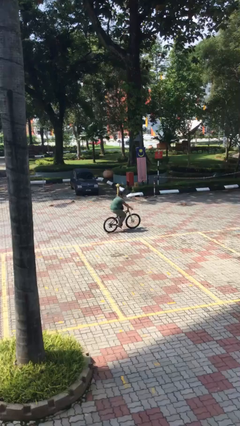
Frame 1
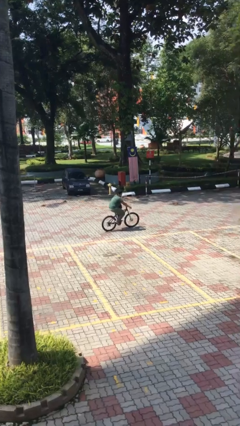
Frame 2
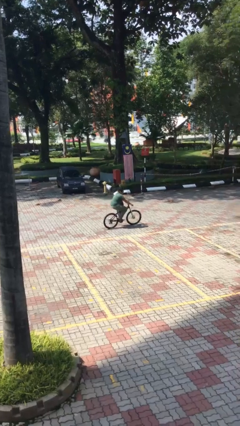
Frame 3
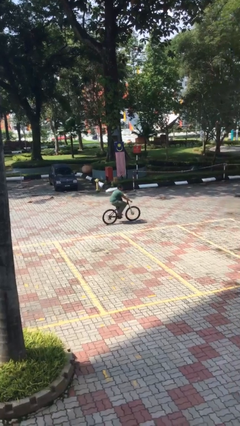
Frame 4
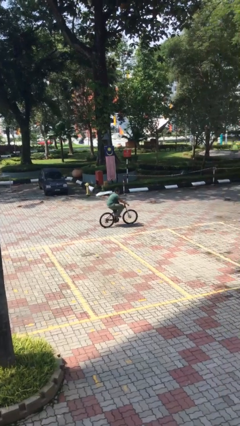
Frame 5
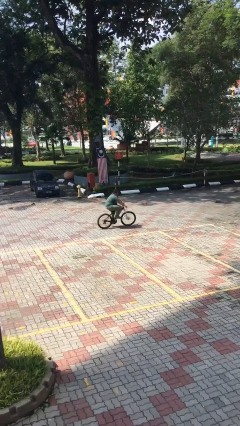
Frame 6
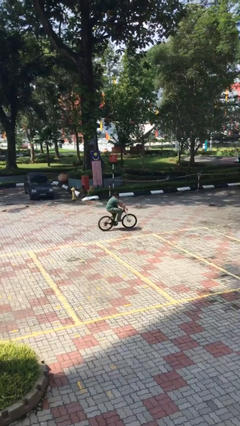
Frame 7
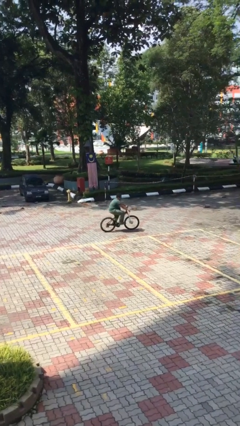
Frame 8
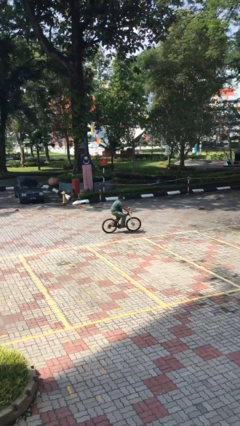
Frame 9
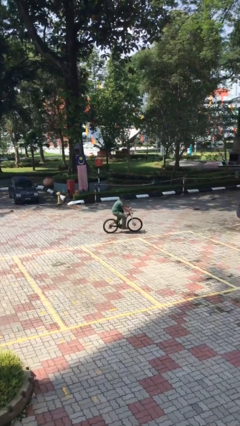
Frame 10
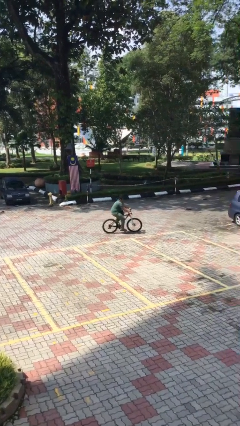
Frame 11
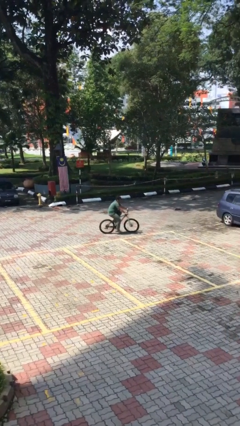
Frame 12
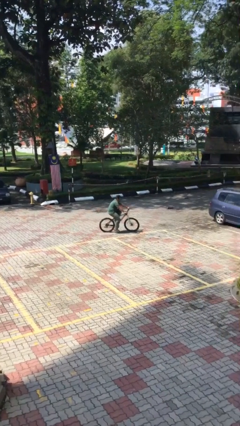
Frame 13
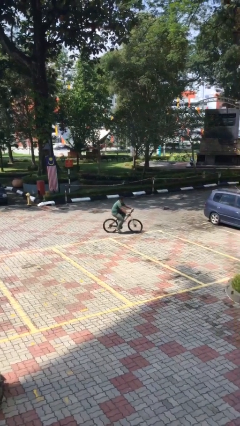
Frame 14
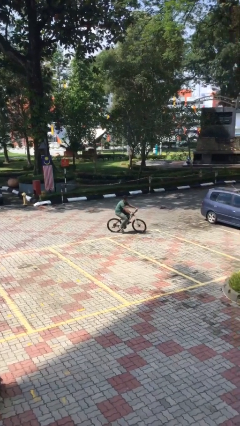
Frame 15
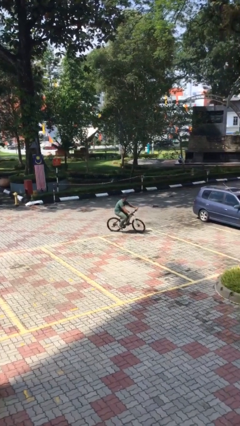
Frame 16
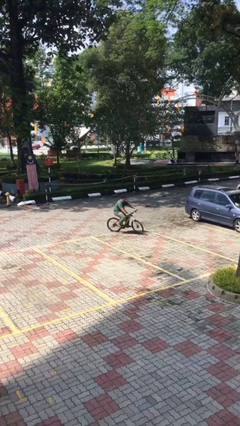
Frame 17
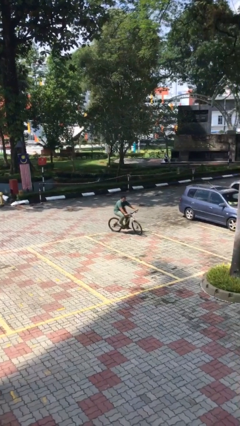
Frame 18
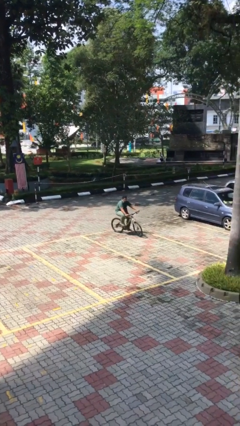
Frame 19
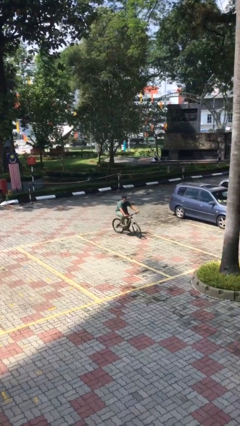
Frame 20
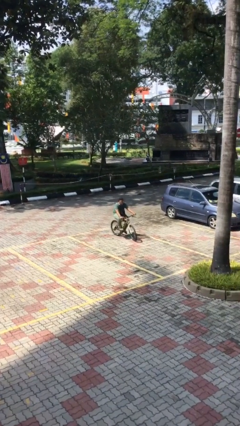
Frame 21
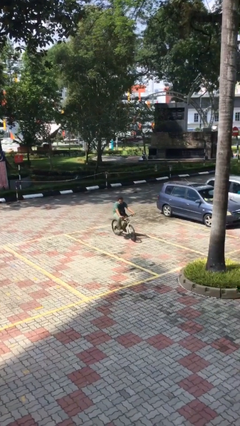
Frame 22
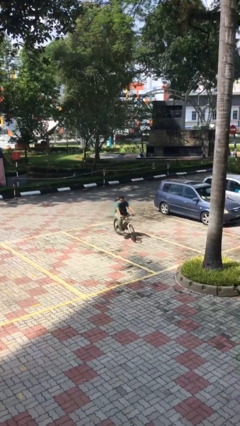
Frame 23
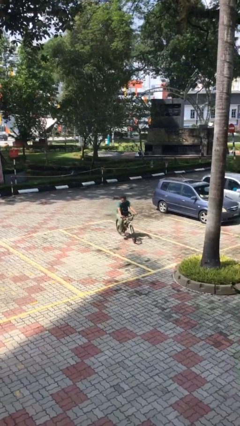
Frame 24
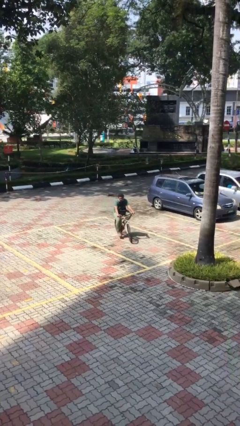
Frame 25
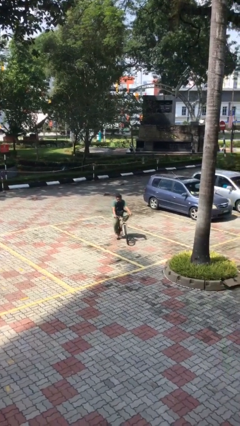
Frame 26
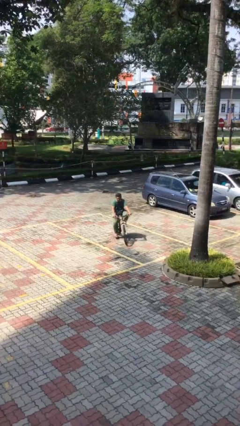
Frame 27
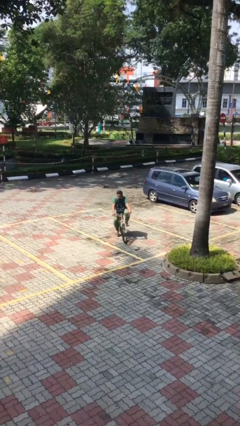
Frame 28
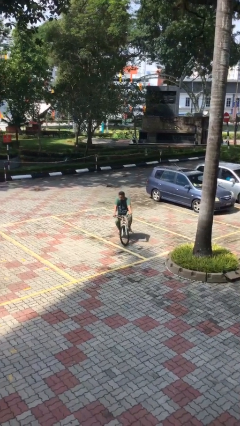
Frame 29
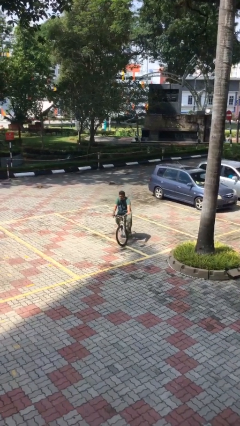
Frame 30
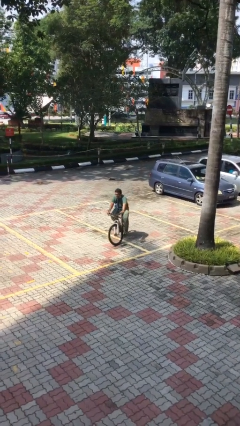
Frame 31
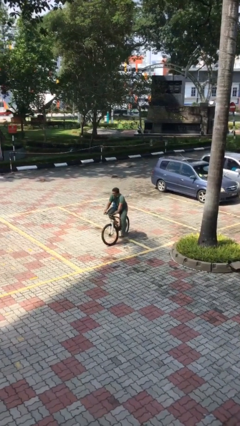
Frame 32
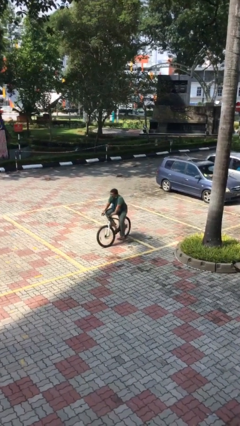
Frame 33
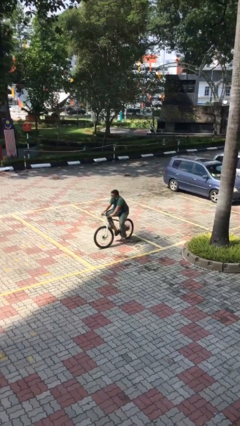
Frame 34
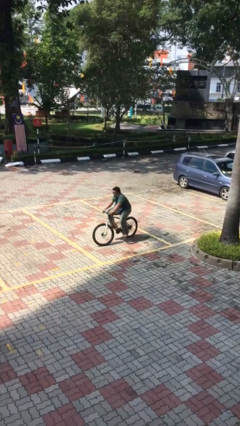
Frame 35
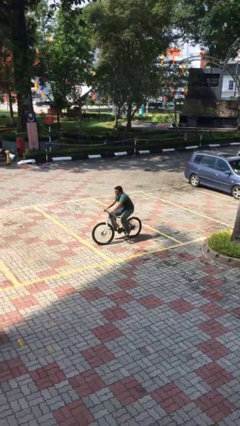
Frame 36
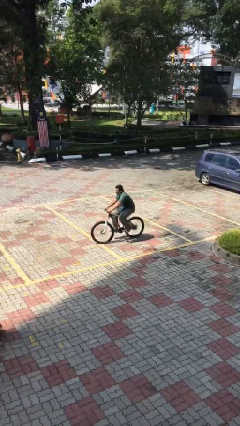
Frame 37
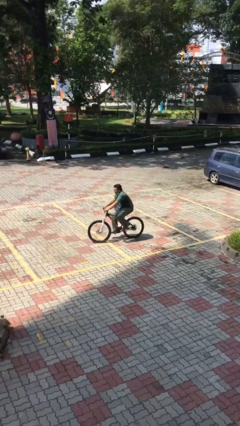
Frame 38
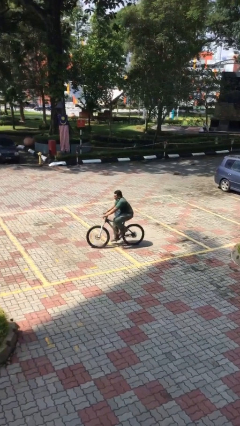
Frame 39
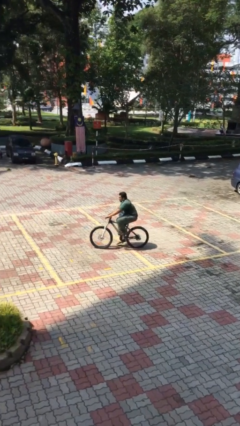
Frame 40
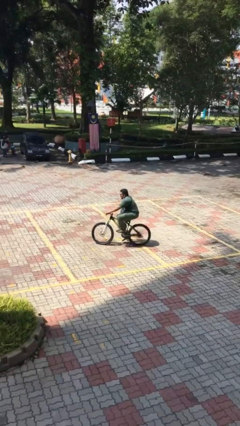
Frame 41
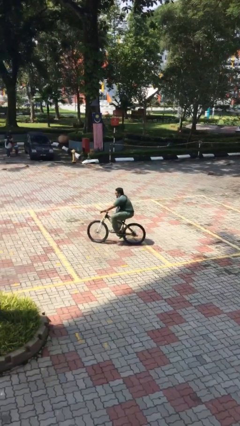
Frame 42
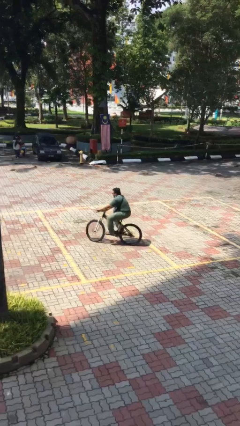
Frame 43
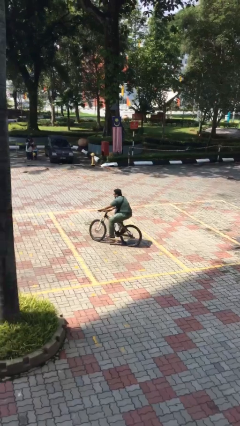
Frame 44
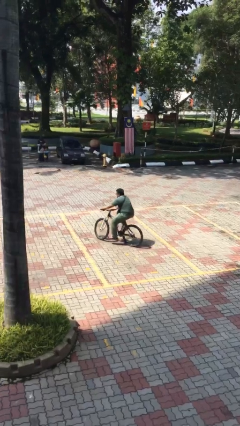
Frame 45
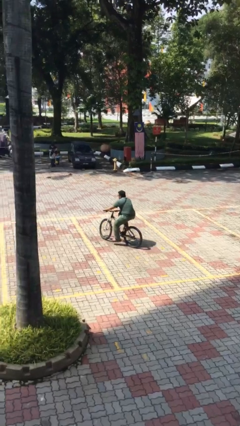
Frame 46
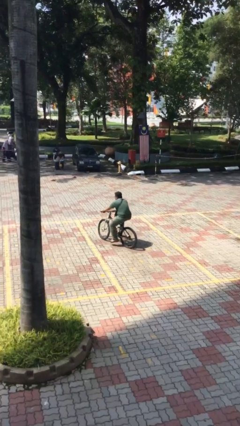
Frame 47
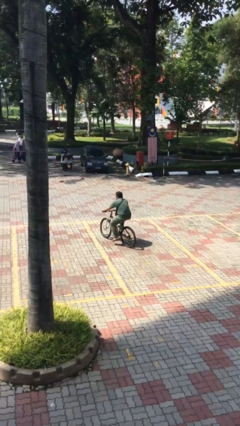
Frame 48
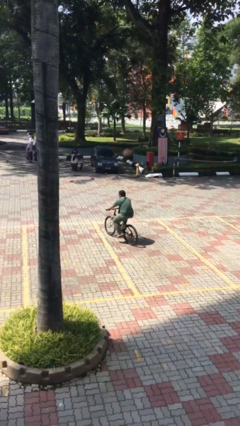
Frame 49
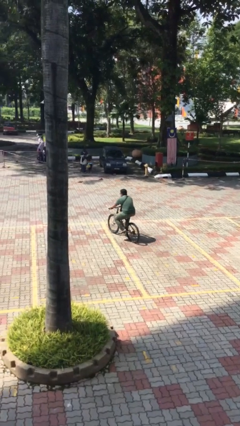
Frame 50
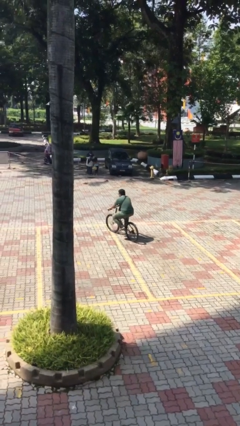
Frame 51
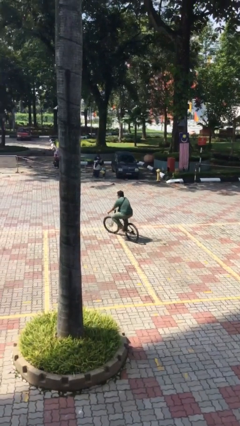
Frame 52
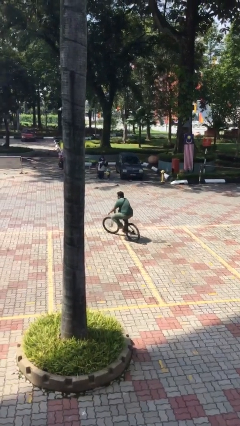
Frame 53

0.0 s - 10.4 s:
person rides bicycle

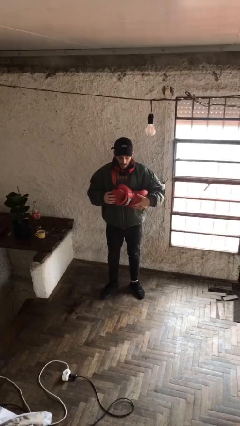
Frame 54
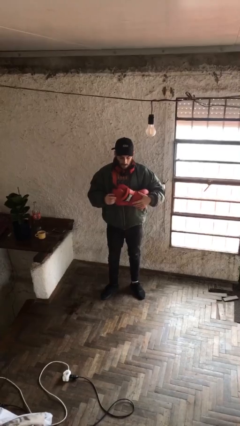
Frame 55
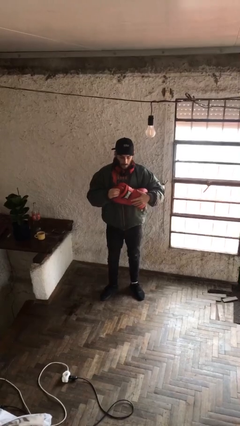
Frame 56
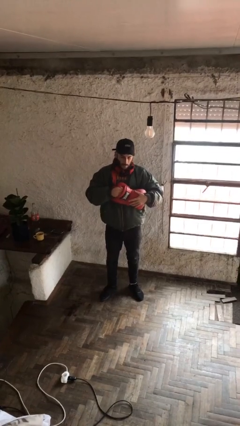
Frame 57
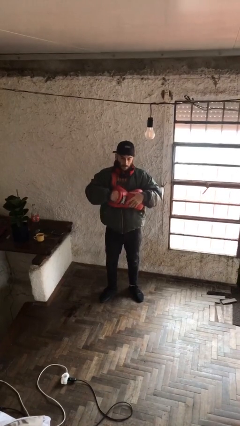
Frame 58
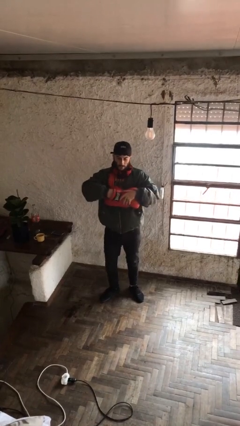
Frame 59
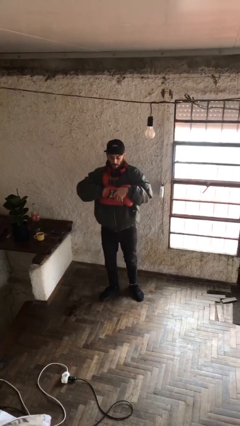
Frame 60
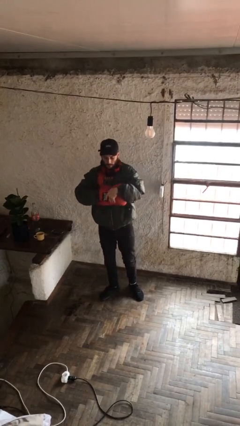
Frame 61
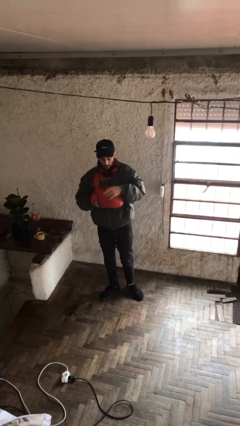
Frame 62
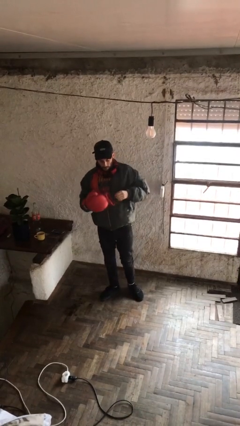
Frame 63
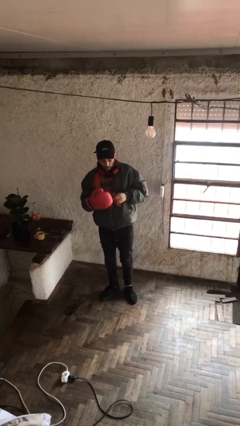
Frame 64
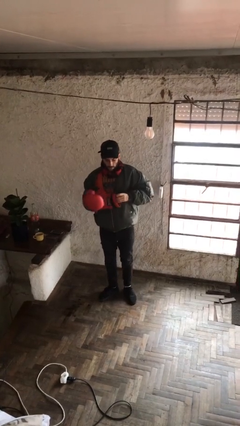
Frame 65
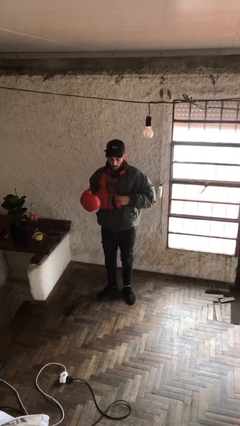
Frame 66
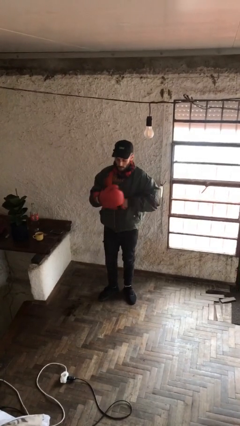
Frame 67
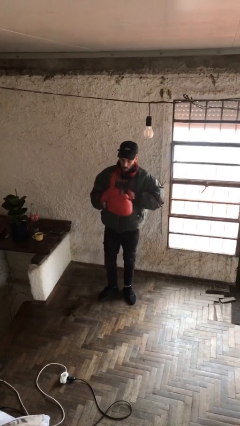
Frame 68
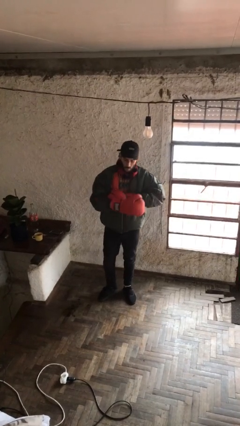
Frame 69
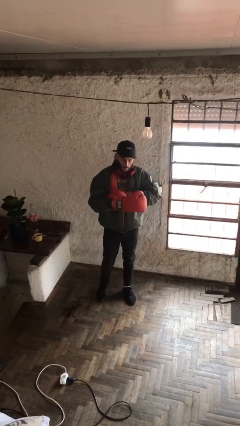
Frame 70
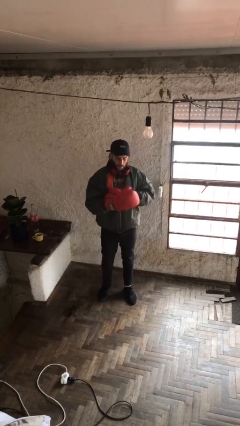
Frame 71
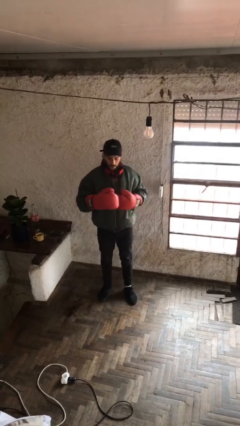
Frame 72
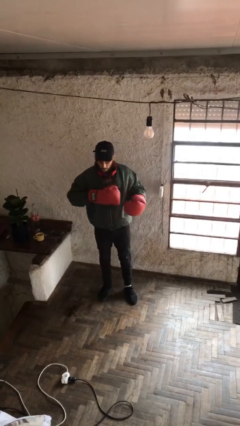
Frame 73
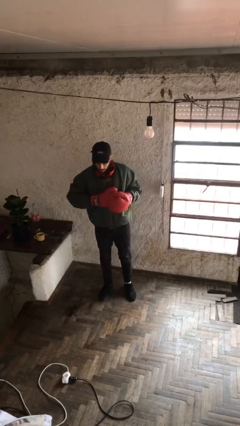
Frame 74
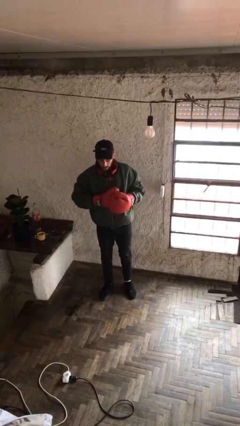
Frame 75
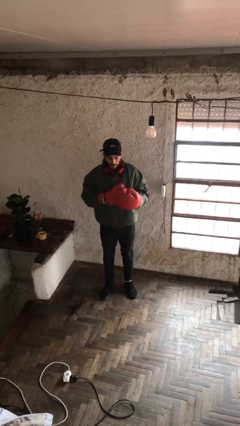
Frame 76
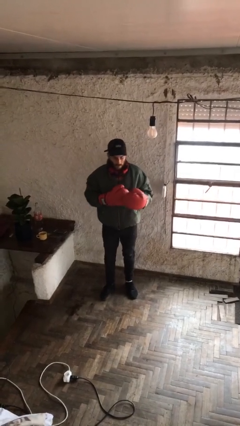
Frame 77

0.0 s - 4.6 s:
person puts on gloves

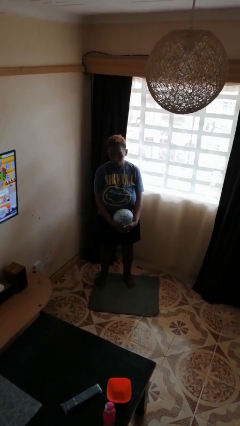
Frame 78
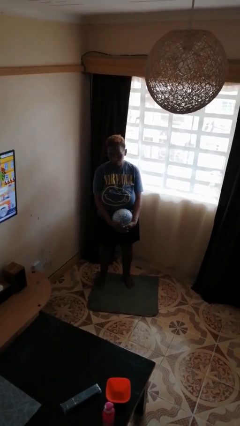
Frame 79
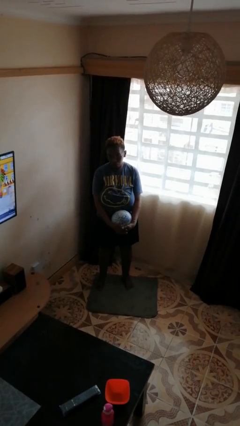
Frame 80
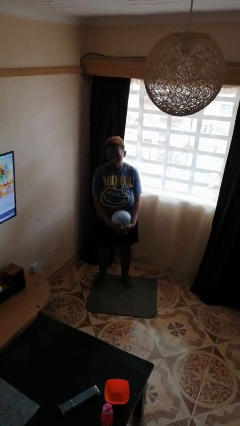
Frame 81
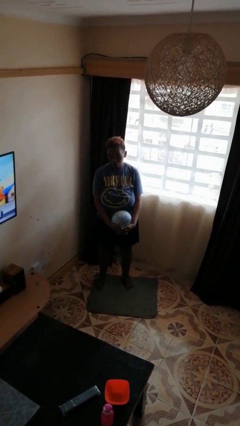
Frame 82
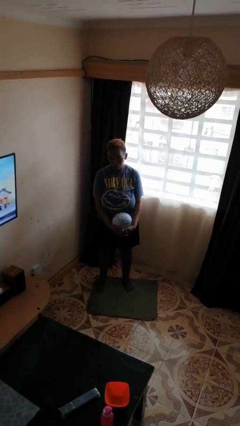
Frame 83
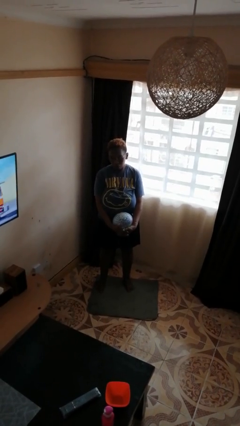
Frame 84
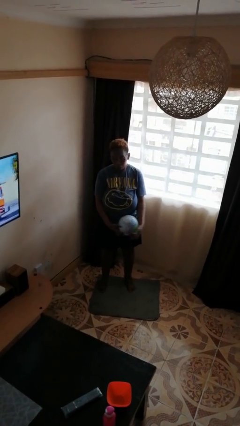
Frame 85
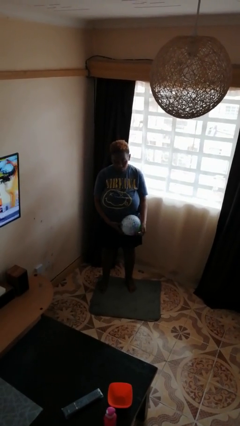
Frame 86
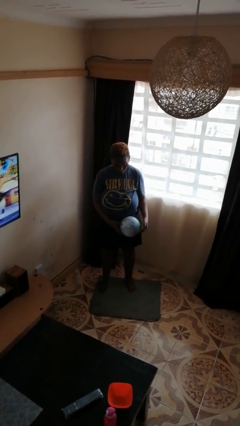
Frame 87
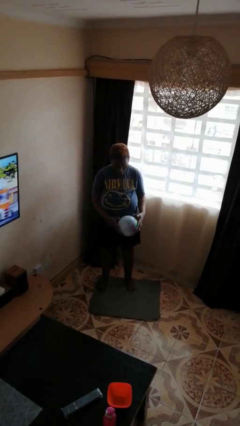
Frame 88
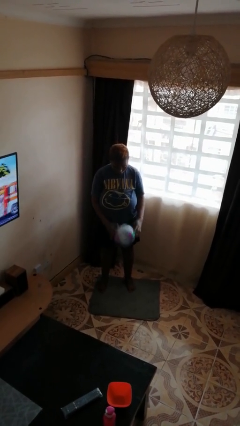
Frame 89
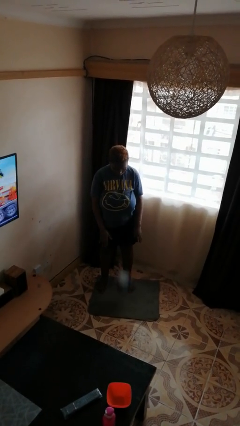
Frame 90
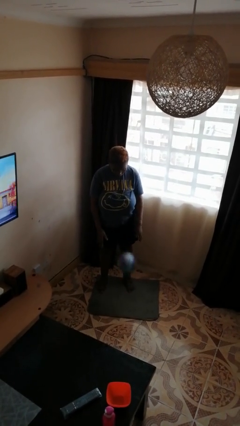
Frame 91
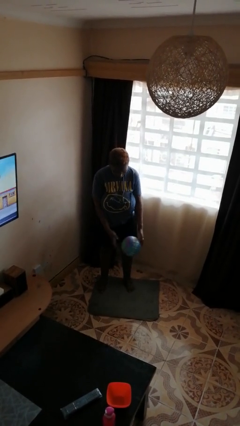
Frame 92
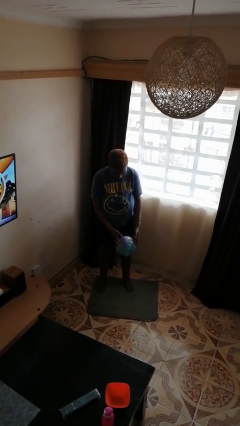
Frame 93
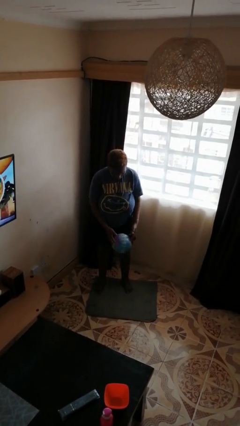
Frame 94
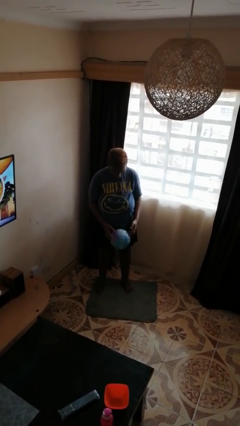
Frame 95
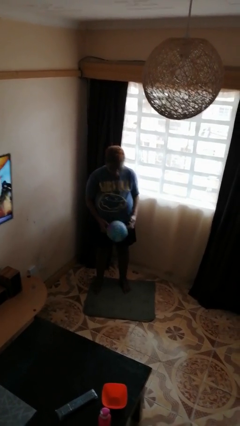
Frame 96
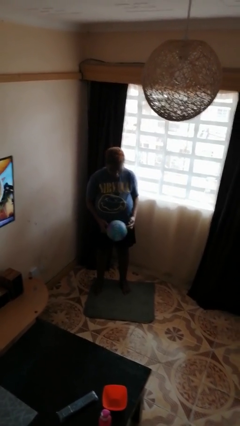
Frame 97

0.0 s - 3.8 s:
person bounces ball on floor
